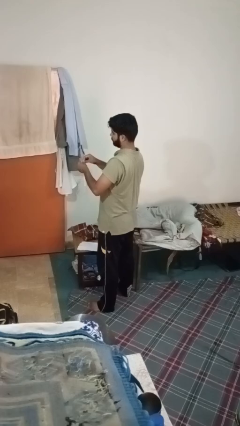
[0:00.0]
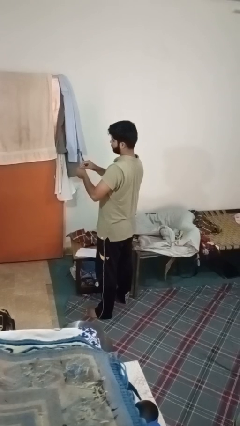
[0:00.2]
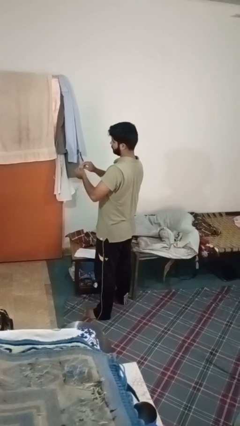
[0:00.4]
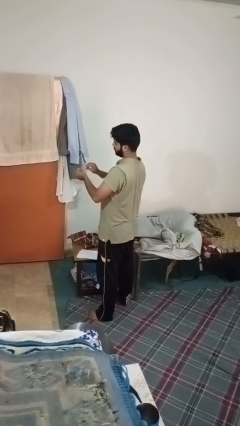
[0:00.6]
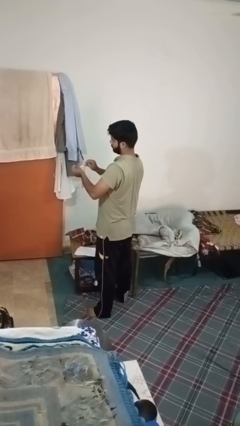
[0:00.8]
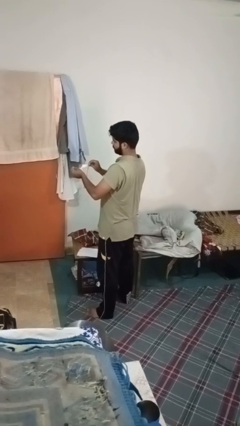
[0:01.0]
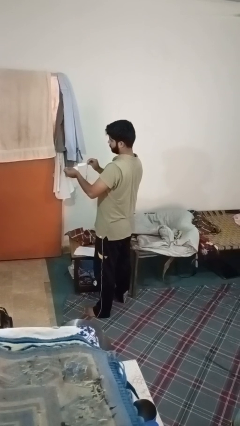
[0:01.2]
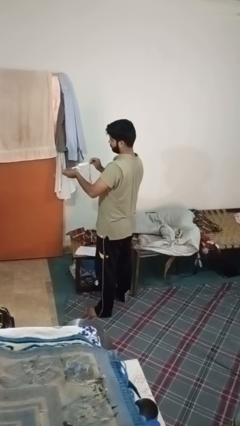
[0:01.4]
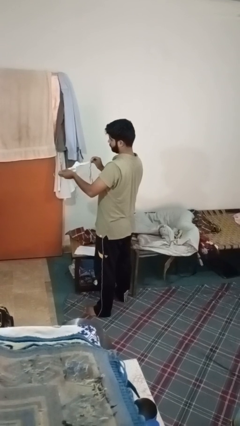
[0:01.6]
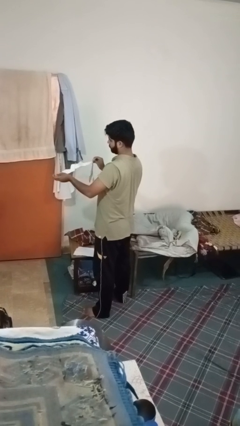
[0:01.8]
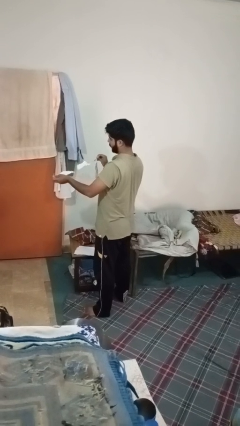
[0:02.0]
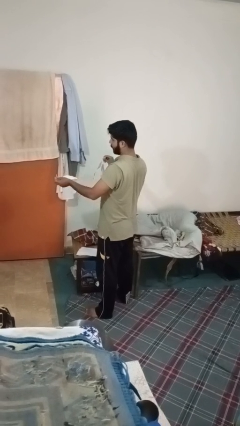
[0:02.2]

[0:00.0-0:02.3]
person tears paper

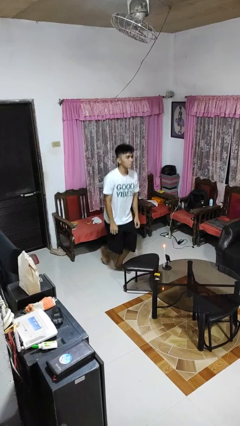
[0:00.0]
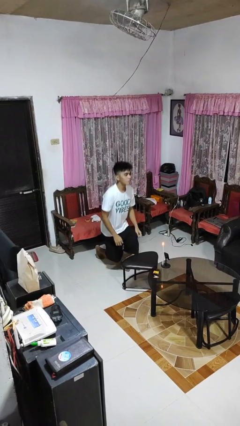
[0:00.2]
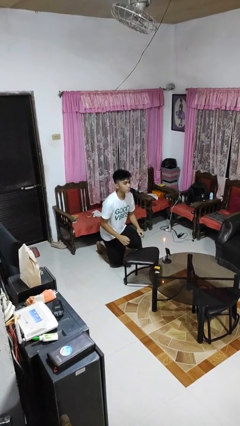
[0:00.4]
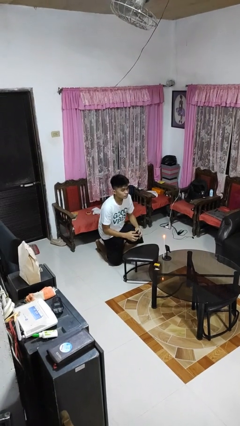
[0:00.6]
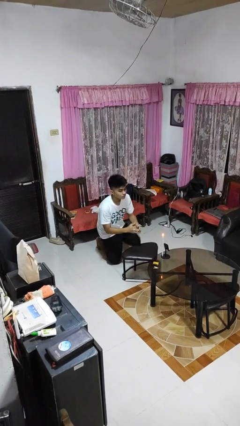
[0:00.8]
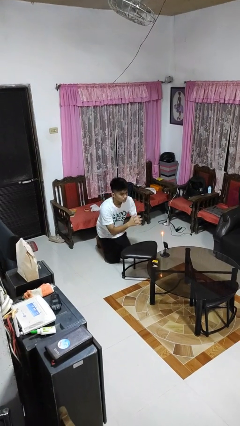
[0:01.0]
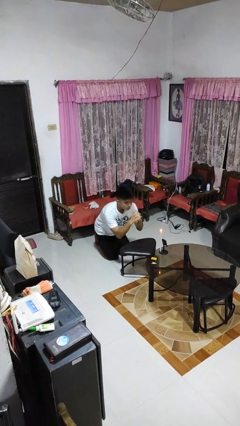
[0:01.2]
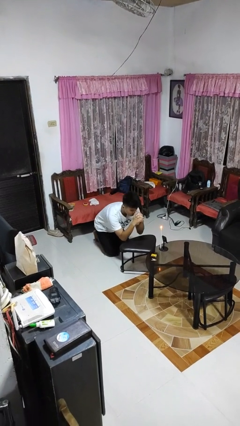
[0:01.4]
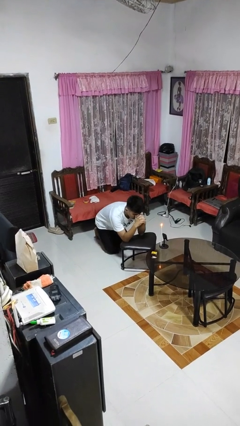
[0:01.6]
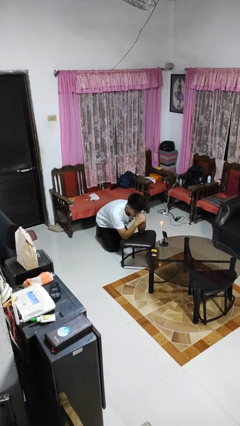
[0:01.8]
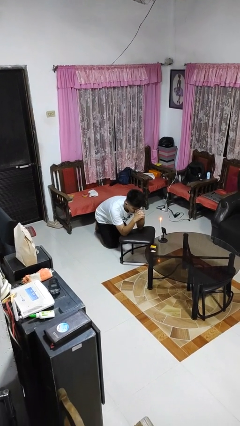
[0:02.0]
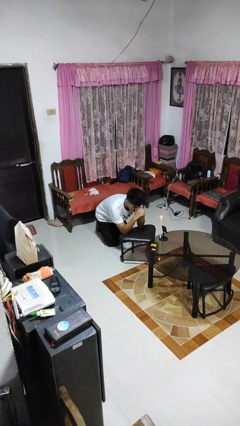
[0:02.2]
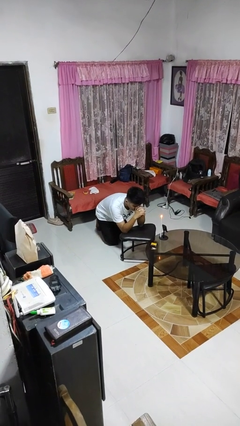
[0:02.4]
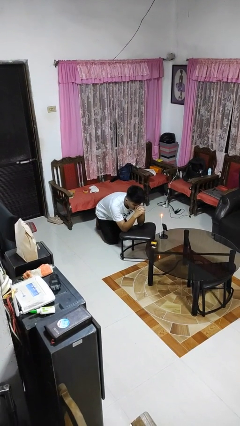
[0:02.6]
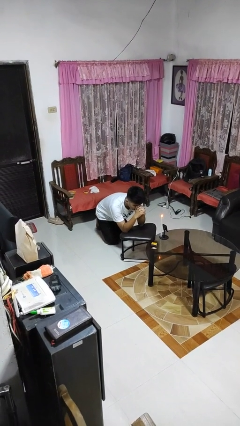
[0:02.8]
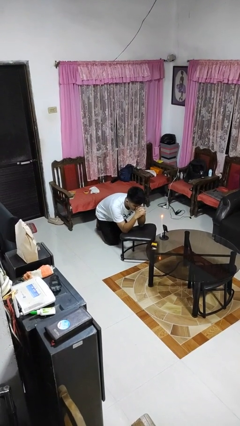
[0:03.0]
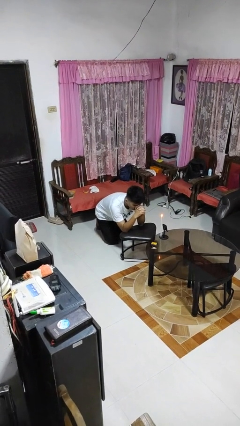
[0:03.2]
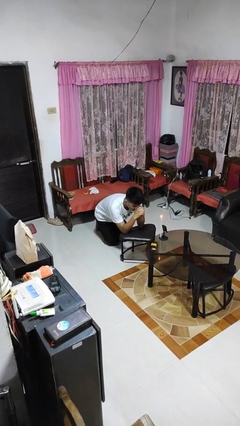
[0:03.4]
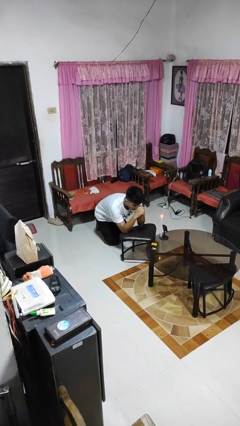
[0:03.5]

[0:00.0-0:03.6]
person prays

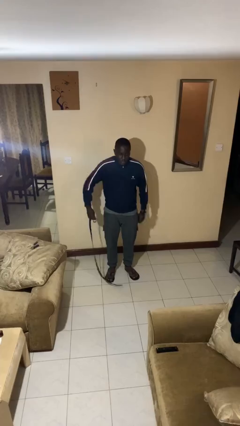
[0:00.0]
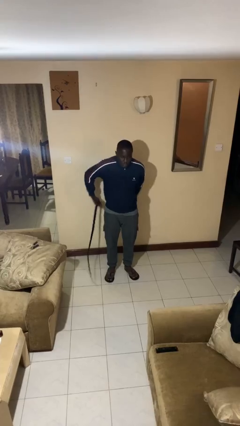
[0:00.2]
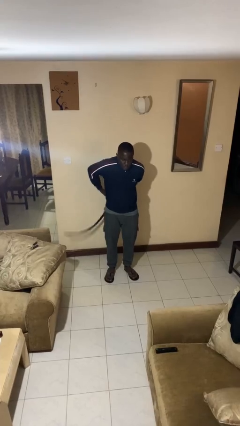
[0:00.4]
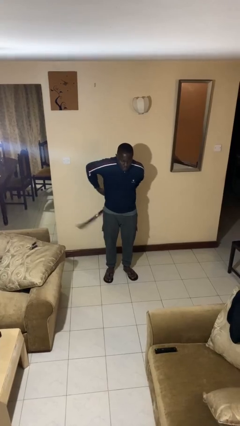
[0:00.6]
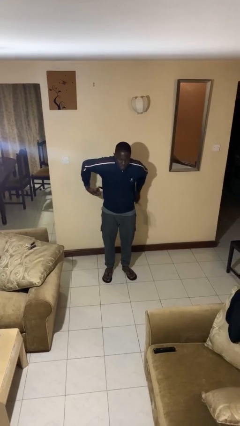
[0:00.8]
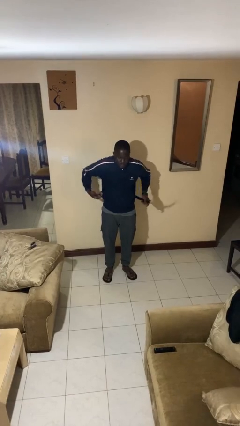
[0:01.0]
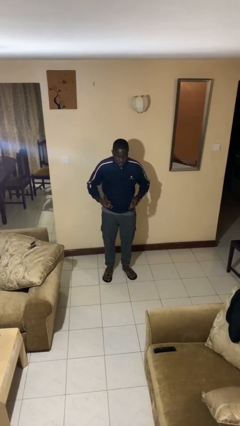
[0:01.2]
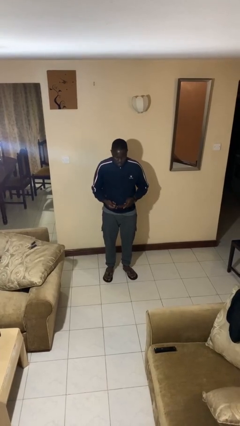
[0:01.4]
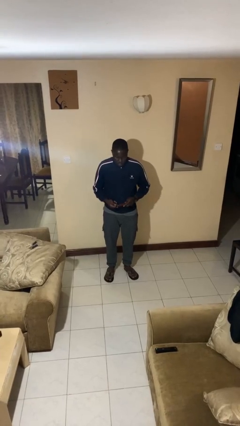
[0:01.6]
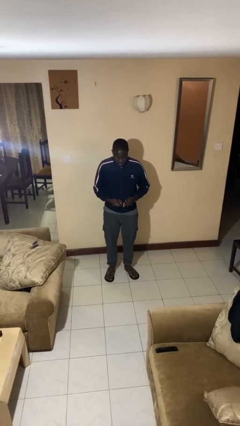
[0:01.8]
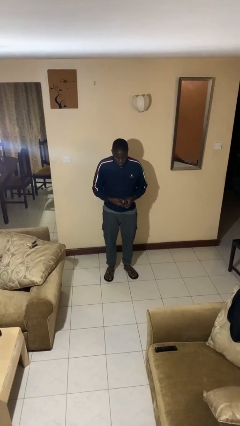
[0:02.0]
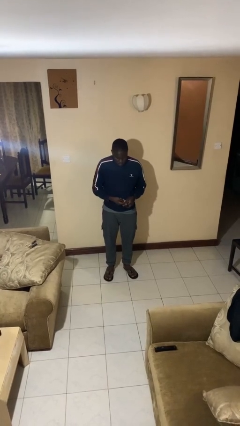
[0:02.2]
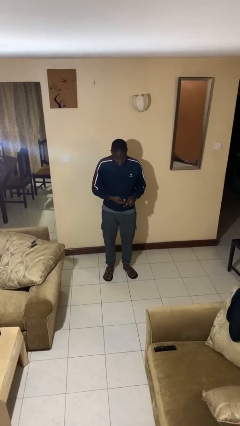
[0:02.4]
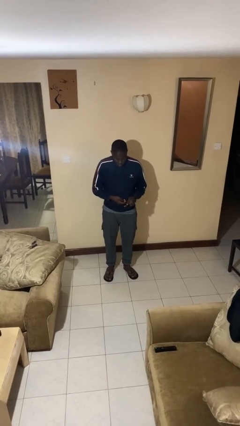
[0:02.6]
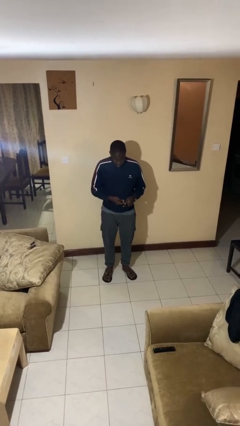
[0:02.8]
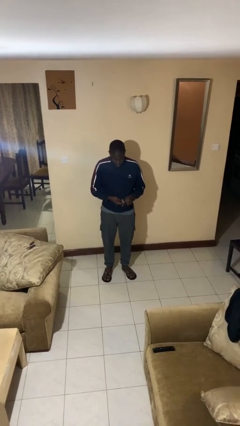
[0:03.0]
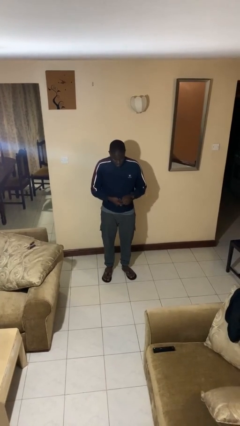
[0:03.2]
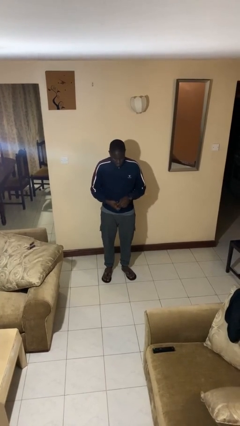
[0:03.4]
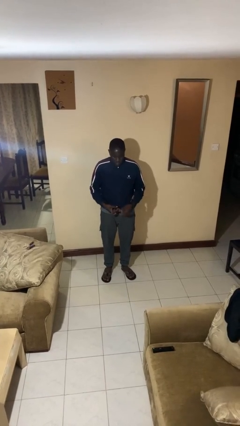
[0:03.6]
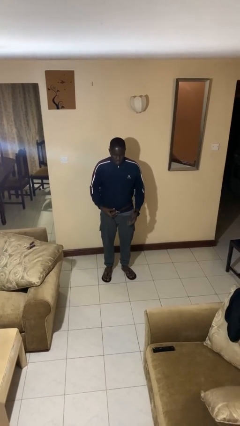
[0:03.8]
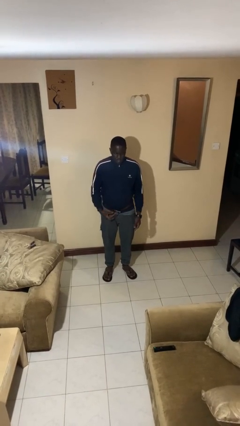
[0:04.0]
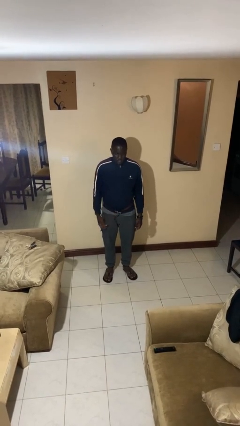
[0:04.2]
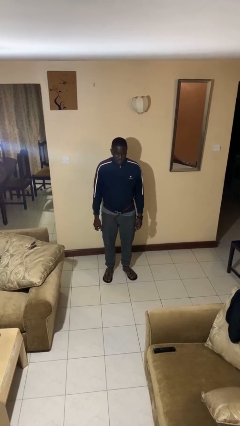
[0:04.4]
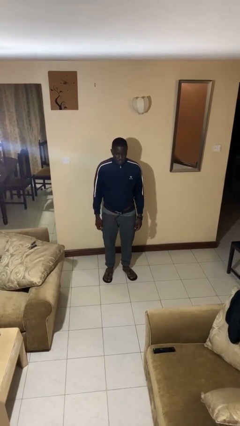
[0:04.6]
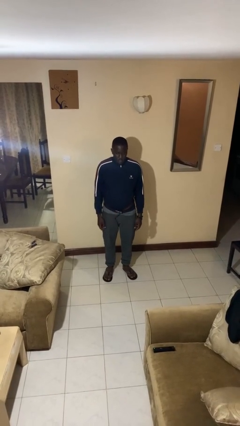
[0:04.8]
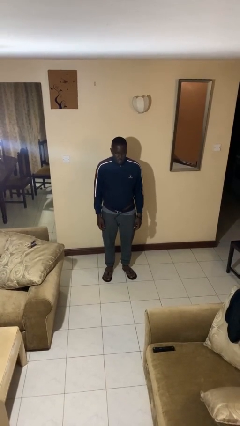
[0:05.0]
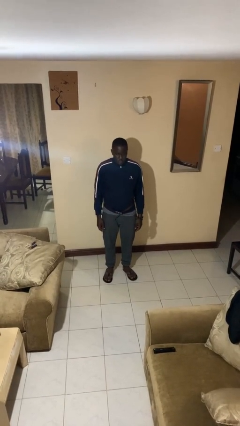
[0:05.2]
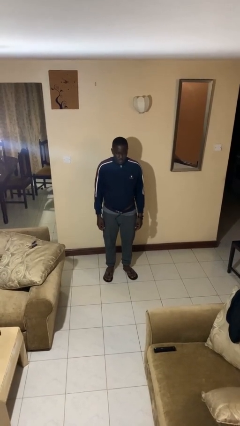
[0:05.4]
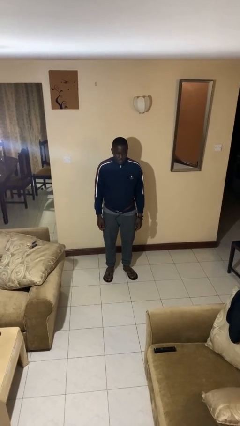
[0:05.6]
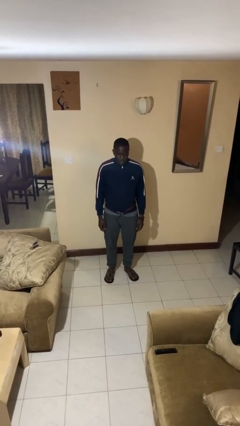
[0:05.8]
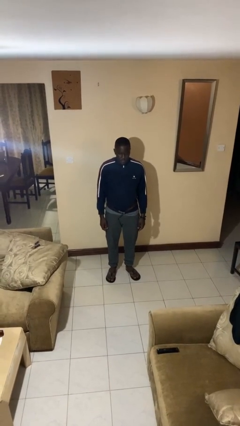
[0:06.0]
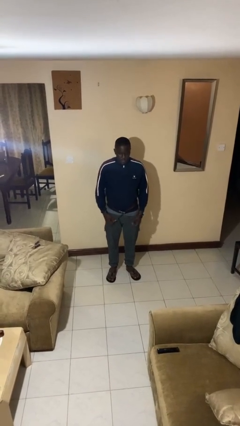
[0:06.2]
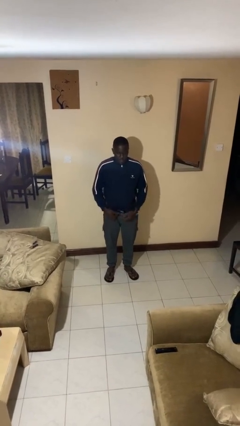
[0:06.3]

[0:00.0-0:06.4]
person puts on belt

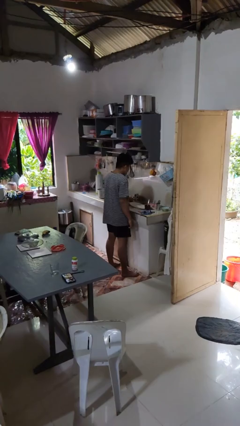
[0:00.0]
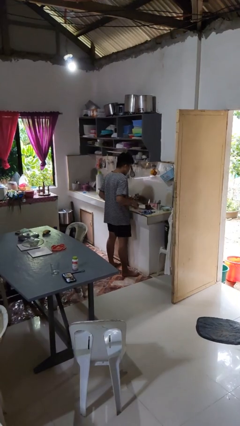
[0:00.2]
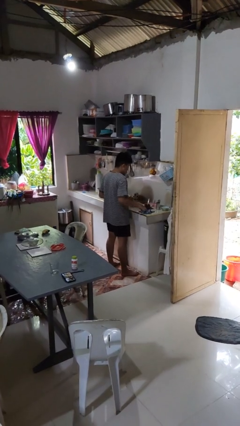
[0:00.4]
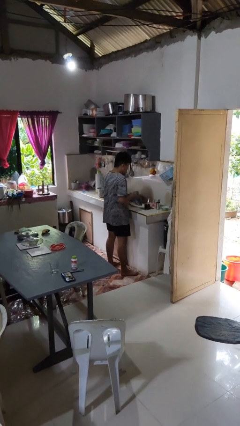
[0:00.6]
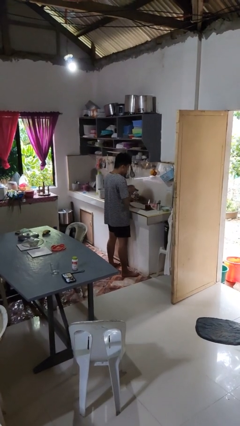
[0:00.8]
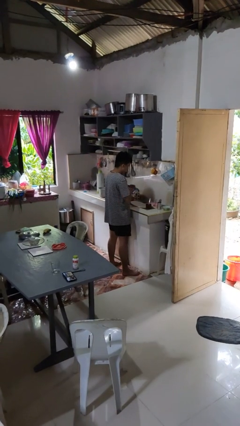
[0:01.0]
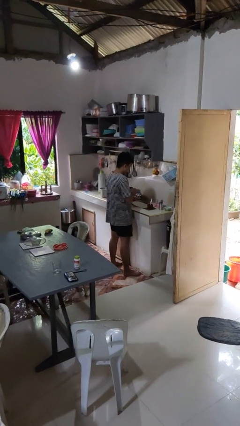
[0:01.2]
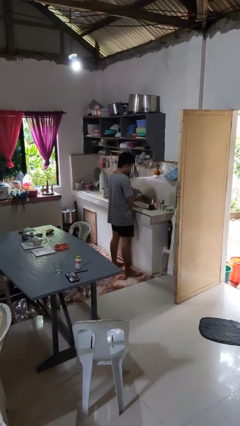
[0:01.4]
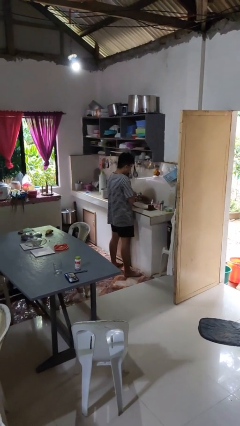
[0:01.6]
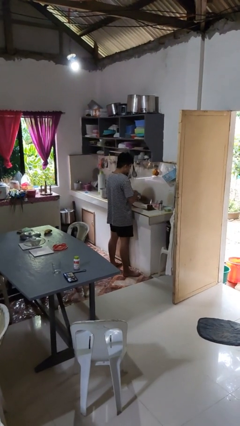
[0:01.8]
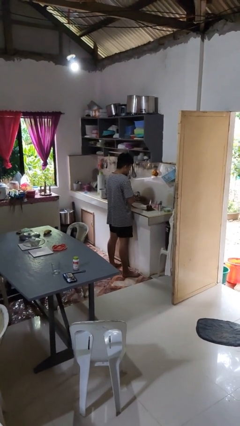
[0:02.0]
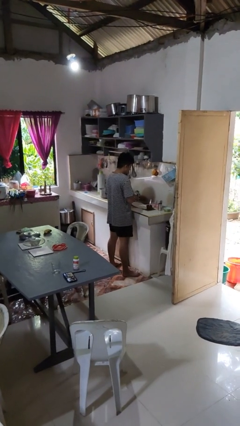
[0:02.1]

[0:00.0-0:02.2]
person dries hands with towel

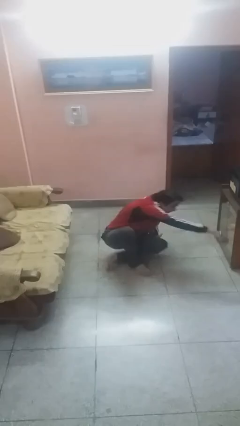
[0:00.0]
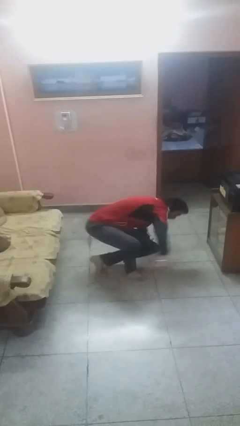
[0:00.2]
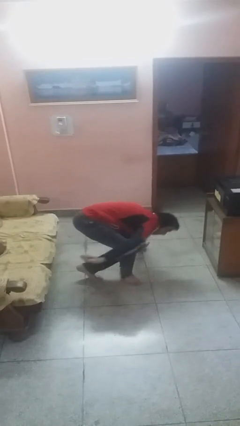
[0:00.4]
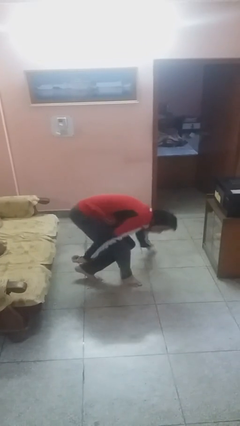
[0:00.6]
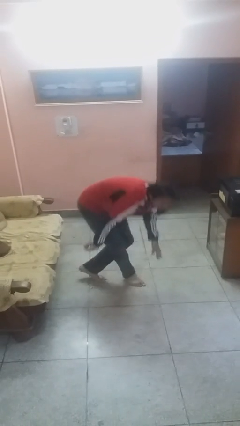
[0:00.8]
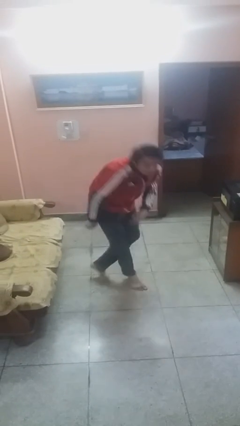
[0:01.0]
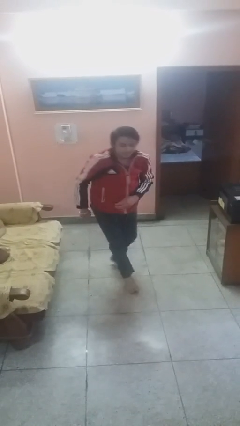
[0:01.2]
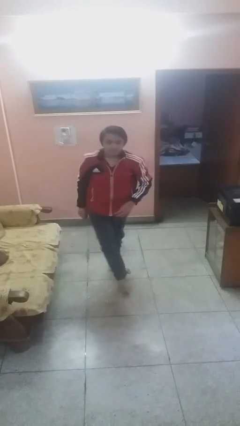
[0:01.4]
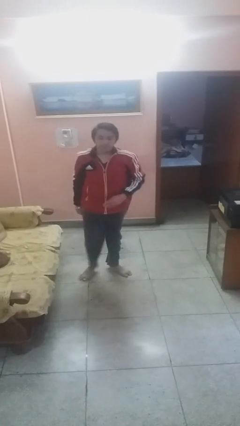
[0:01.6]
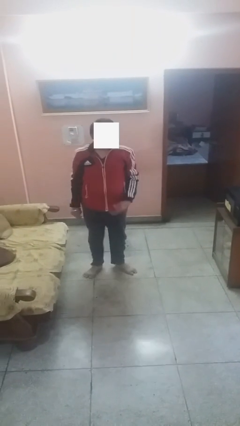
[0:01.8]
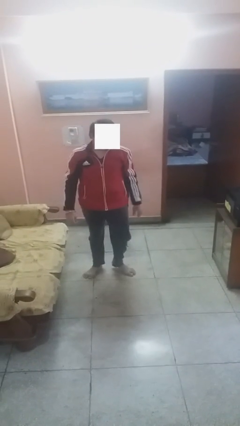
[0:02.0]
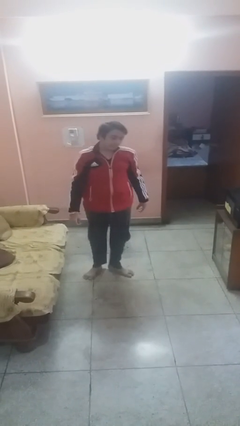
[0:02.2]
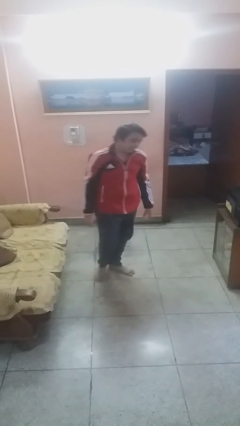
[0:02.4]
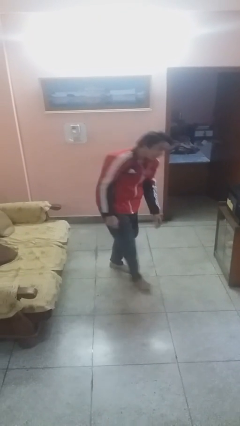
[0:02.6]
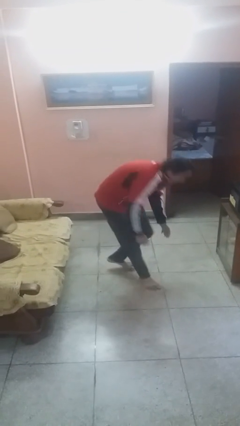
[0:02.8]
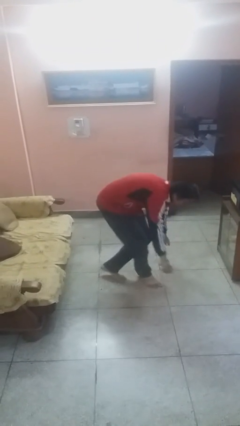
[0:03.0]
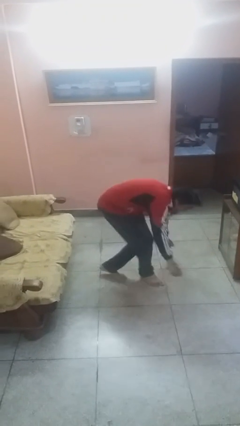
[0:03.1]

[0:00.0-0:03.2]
person stands up

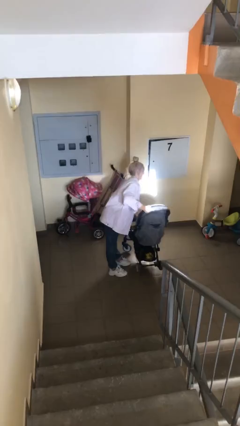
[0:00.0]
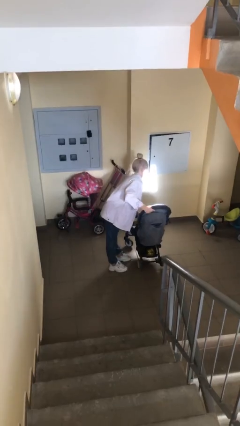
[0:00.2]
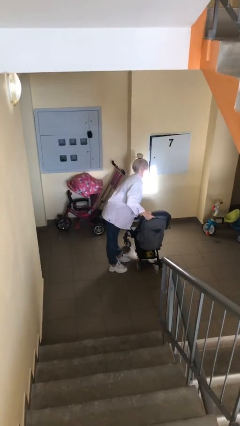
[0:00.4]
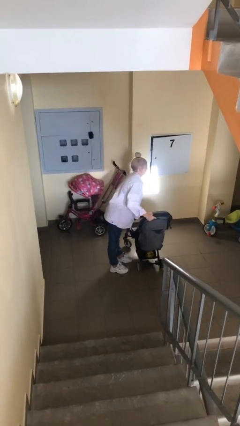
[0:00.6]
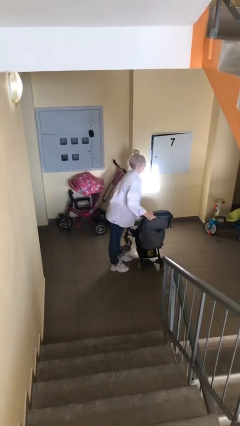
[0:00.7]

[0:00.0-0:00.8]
person puts down object on floor
